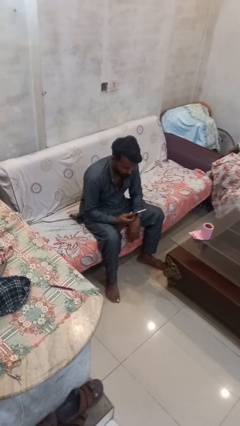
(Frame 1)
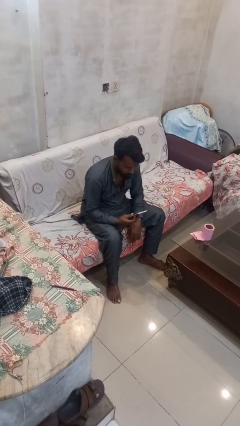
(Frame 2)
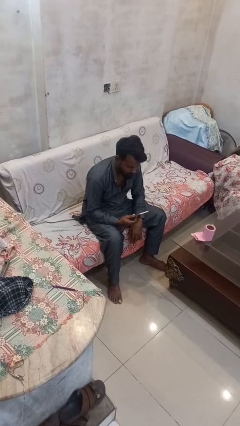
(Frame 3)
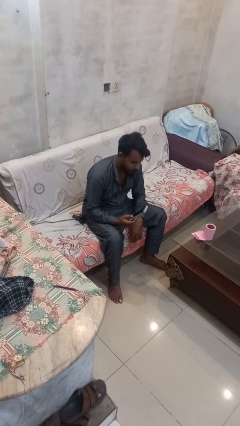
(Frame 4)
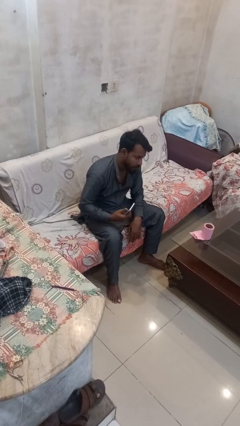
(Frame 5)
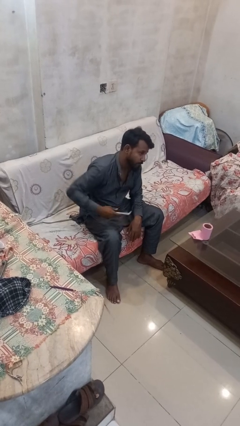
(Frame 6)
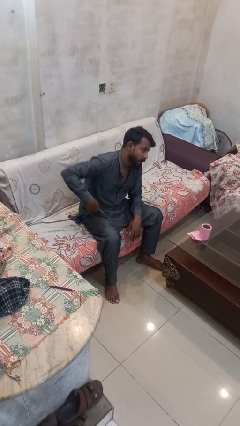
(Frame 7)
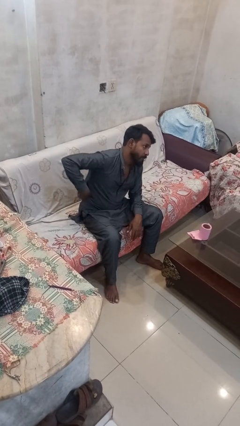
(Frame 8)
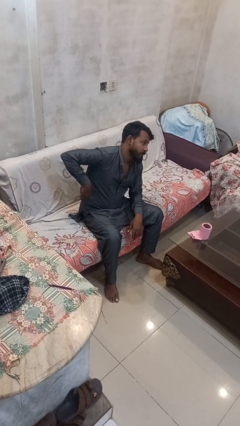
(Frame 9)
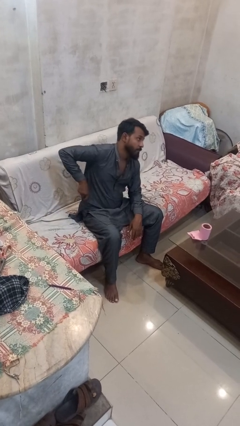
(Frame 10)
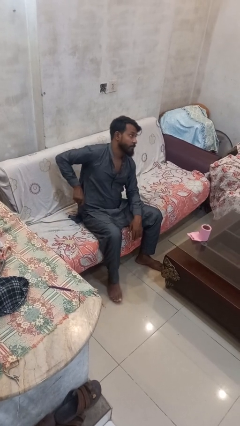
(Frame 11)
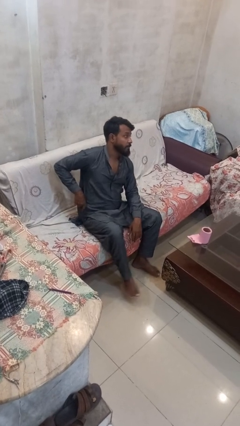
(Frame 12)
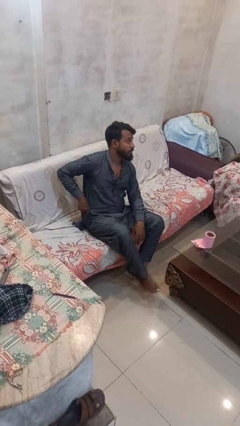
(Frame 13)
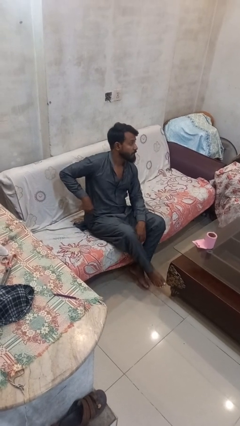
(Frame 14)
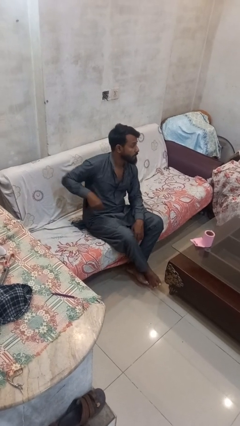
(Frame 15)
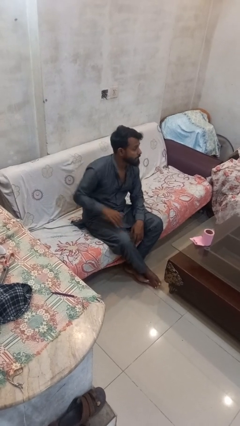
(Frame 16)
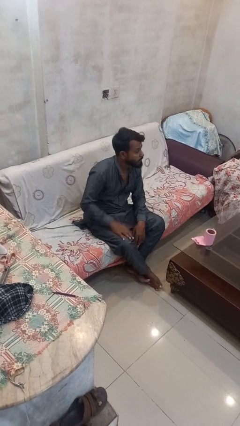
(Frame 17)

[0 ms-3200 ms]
person puts phone into pocket

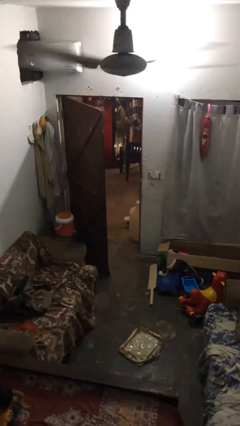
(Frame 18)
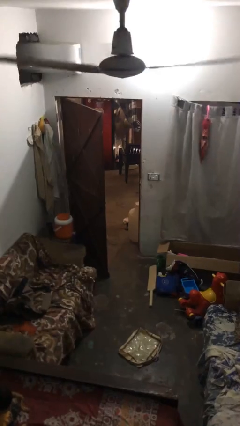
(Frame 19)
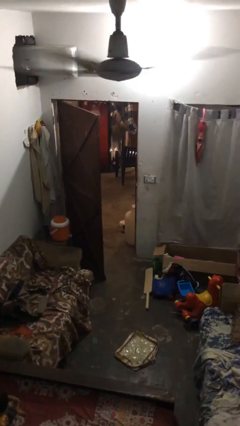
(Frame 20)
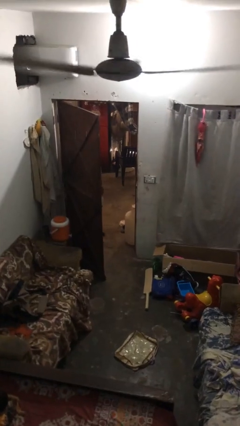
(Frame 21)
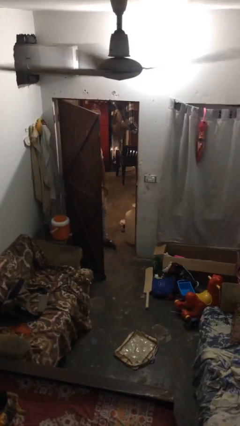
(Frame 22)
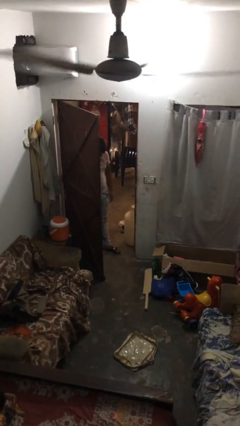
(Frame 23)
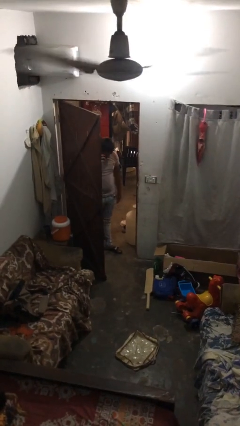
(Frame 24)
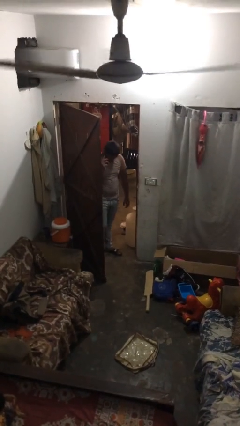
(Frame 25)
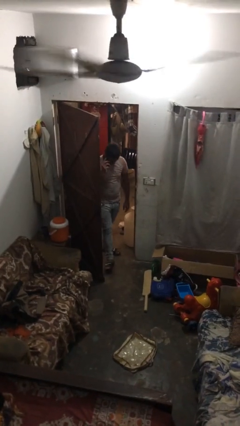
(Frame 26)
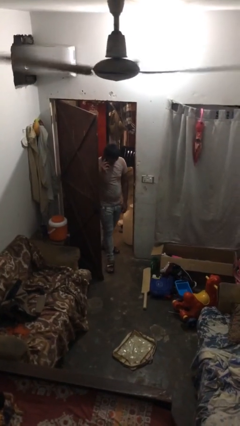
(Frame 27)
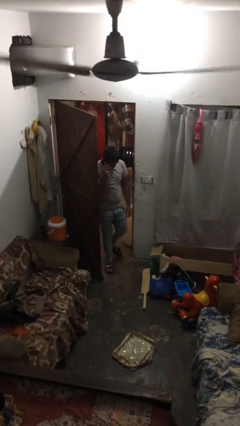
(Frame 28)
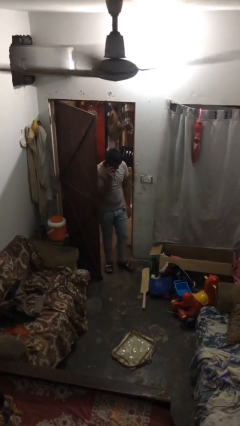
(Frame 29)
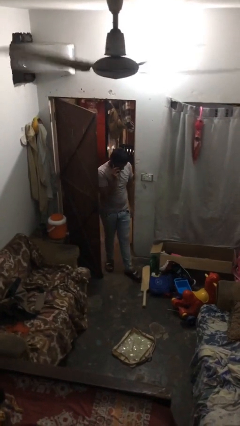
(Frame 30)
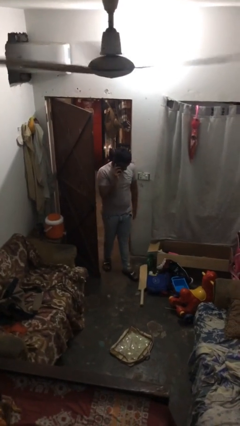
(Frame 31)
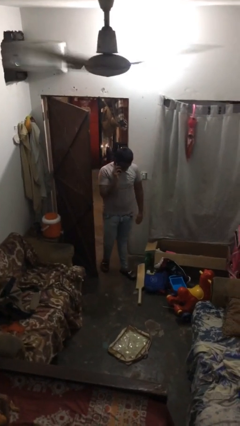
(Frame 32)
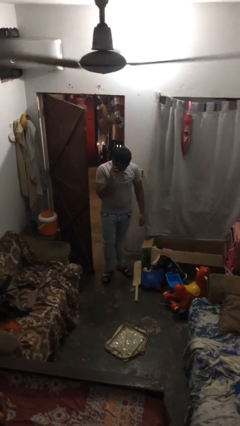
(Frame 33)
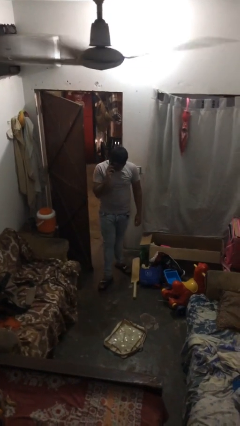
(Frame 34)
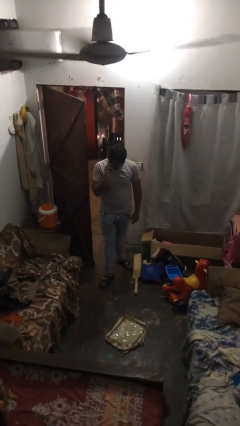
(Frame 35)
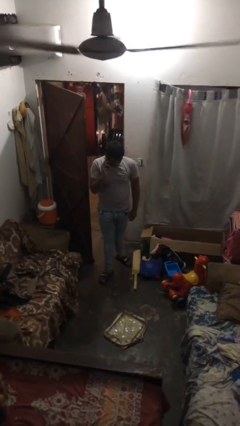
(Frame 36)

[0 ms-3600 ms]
person enters scene through structure

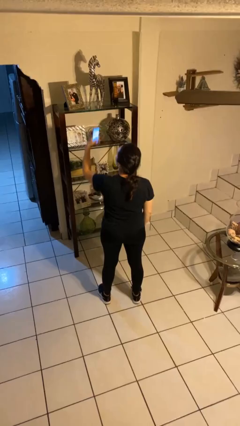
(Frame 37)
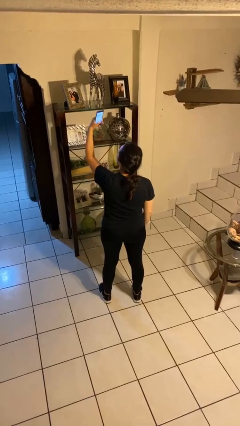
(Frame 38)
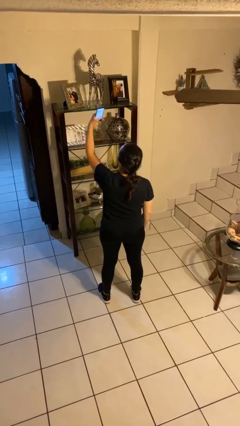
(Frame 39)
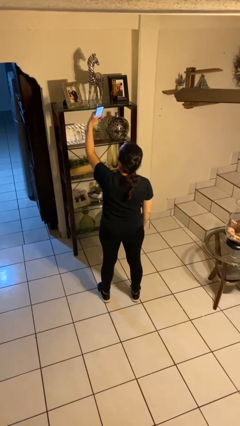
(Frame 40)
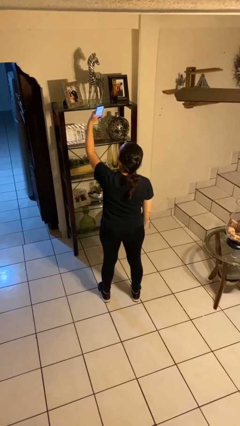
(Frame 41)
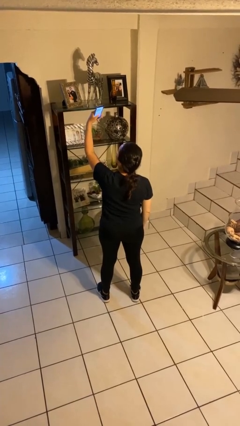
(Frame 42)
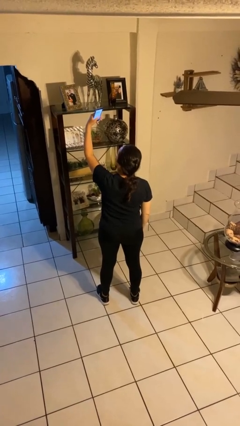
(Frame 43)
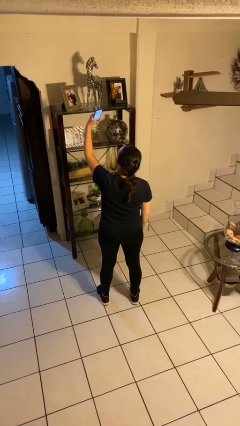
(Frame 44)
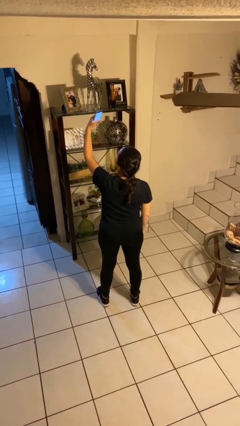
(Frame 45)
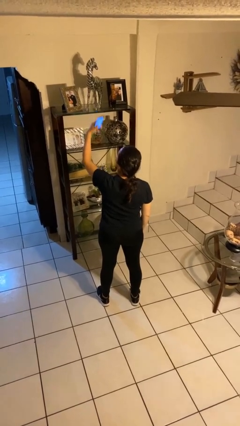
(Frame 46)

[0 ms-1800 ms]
person takes selfie

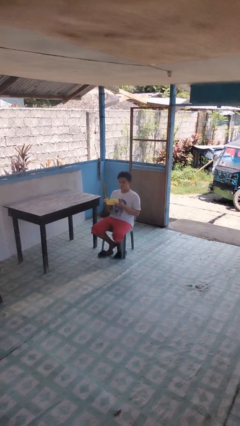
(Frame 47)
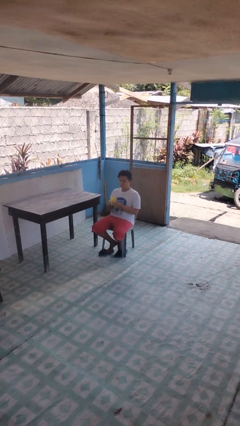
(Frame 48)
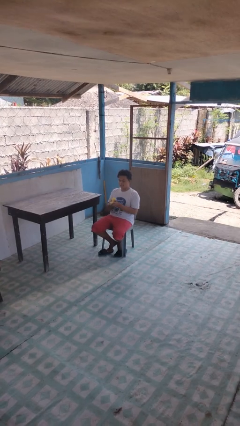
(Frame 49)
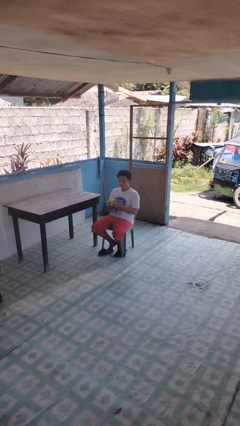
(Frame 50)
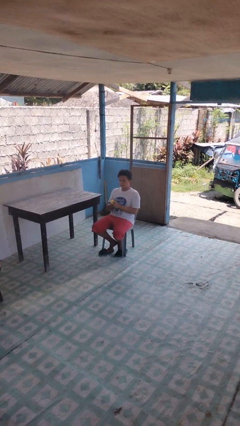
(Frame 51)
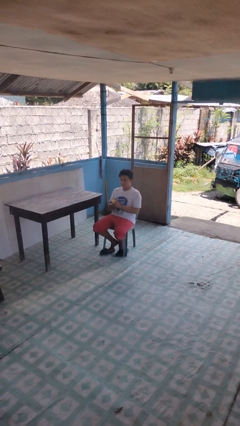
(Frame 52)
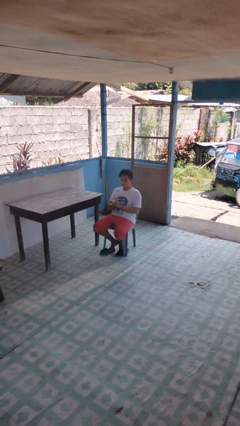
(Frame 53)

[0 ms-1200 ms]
person crumples paper

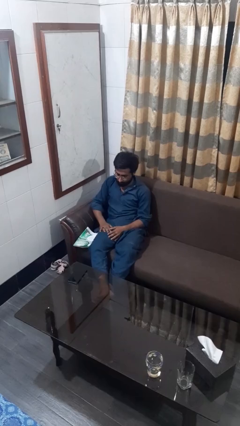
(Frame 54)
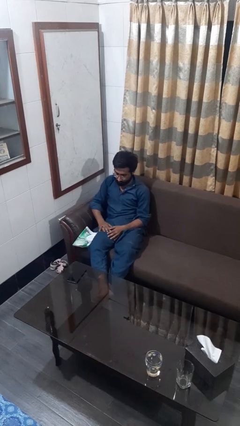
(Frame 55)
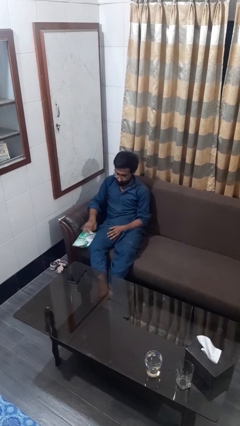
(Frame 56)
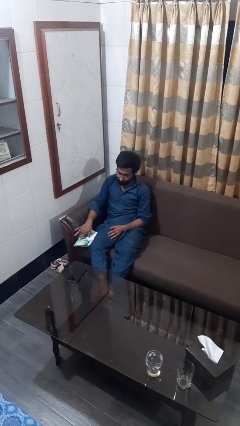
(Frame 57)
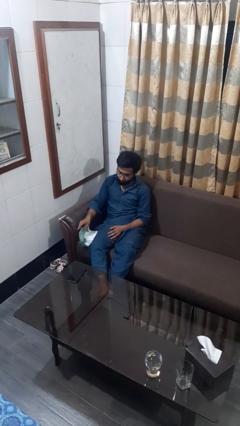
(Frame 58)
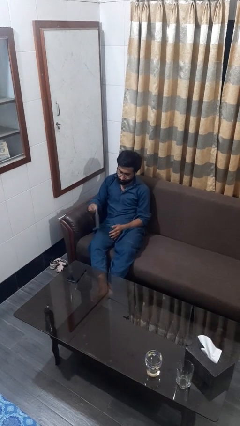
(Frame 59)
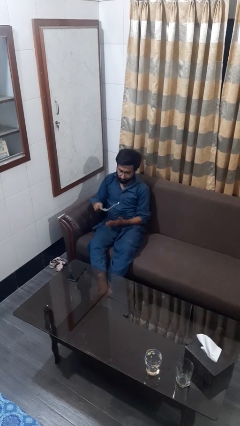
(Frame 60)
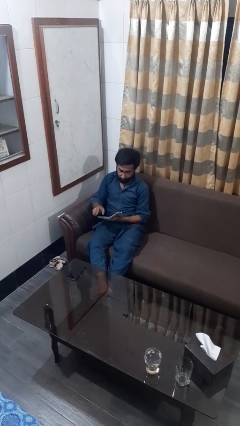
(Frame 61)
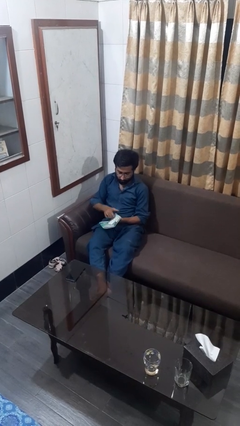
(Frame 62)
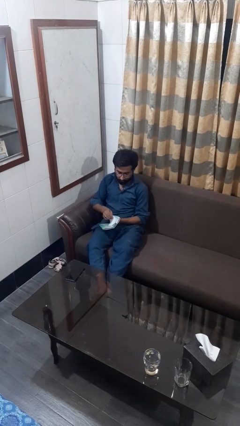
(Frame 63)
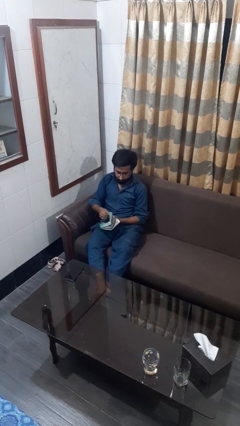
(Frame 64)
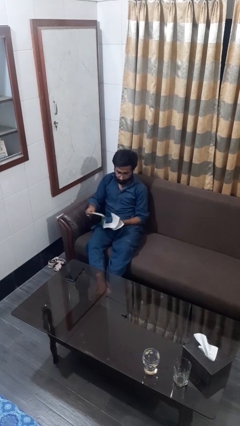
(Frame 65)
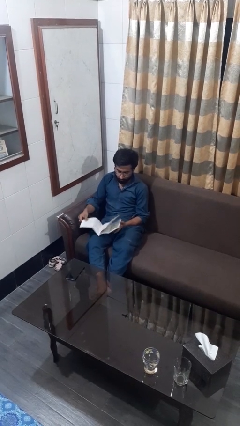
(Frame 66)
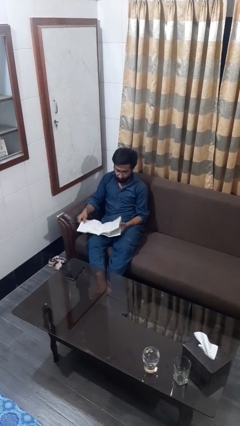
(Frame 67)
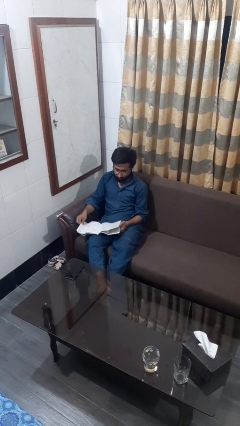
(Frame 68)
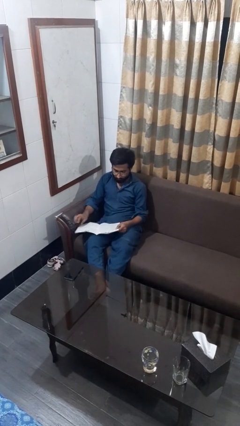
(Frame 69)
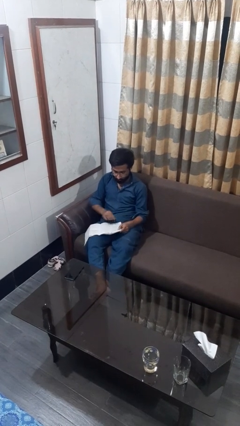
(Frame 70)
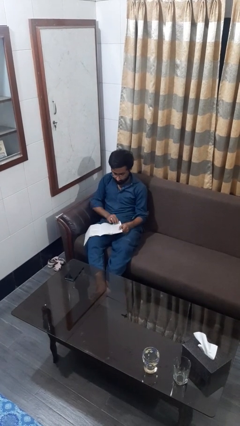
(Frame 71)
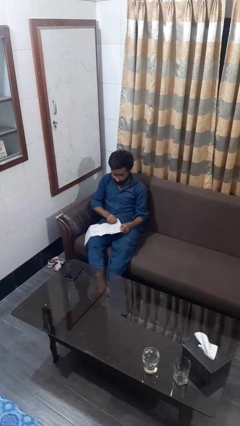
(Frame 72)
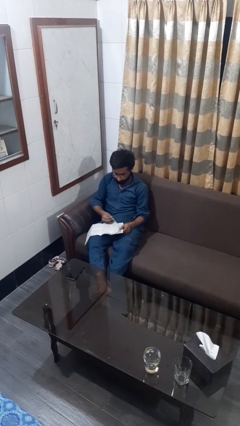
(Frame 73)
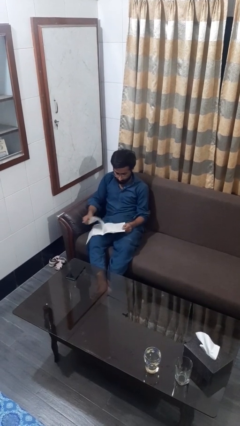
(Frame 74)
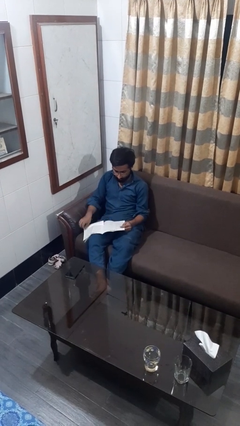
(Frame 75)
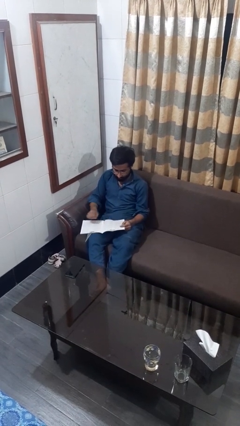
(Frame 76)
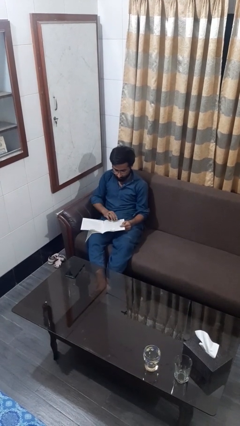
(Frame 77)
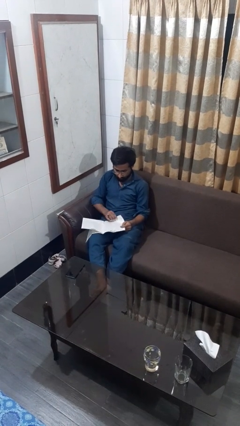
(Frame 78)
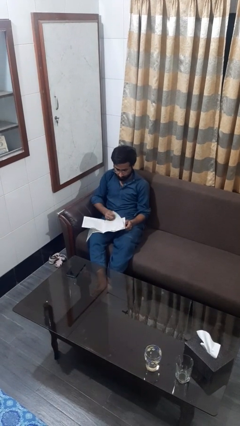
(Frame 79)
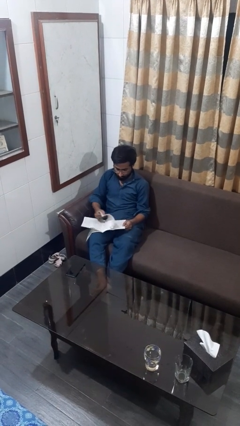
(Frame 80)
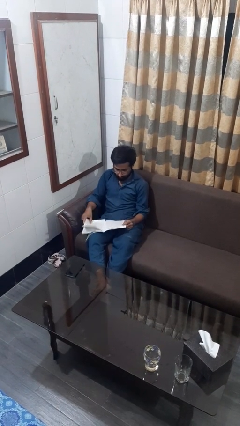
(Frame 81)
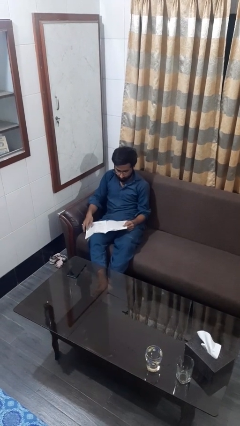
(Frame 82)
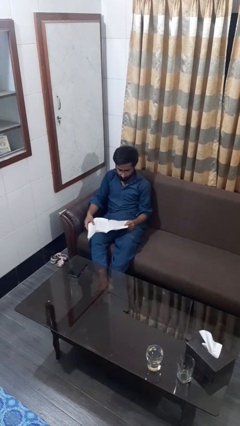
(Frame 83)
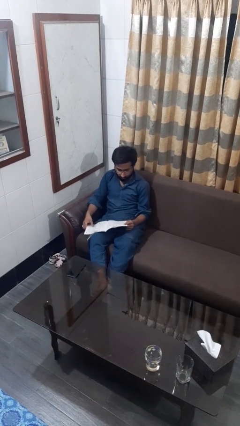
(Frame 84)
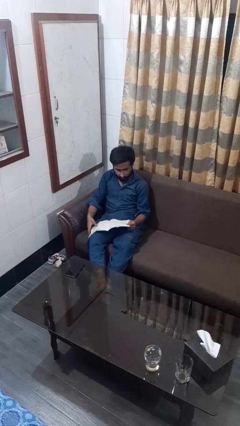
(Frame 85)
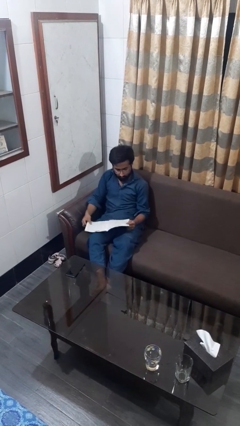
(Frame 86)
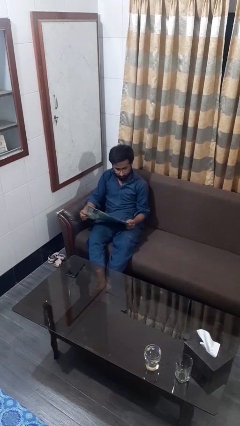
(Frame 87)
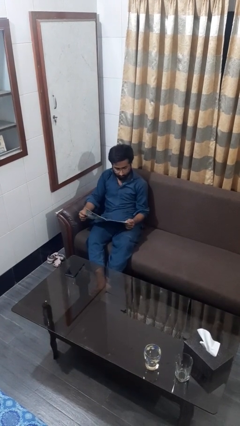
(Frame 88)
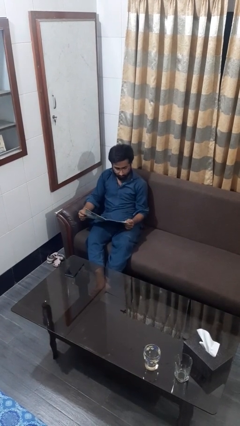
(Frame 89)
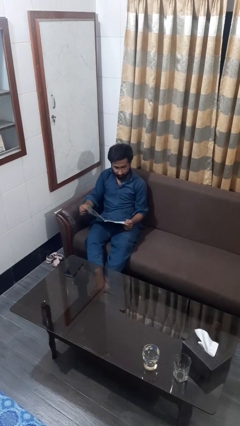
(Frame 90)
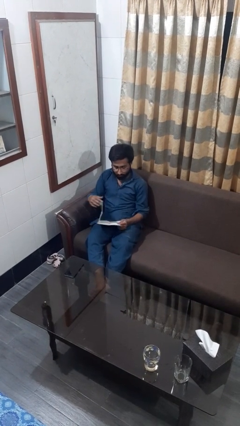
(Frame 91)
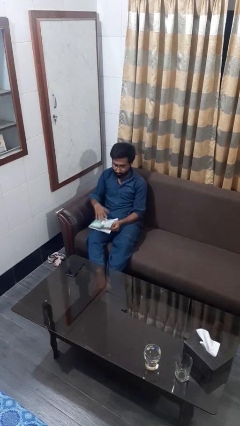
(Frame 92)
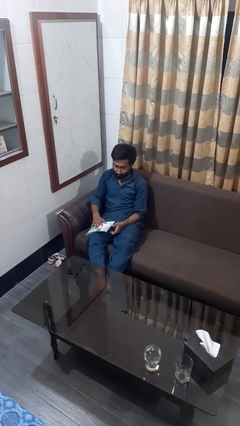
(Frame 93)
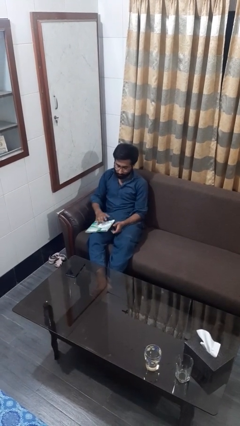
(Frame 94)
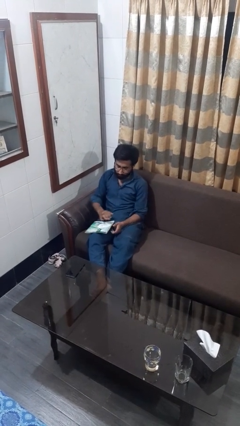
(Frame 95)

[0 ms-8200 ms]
person reads magazine
